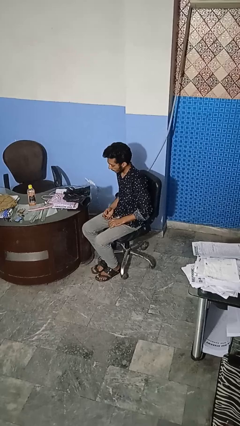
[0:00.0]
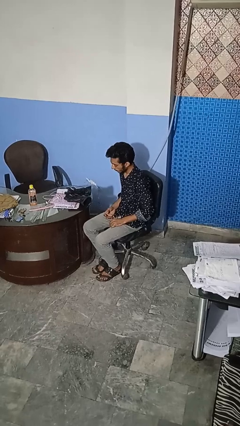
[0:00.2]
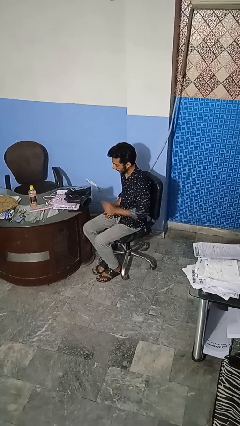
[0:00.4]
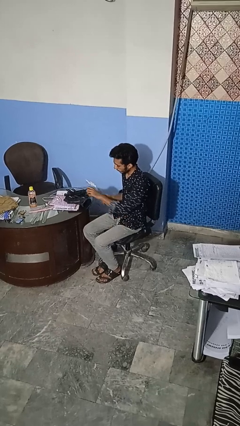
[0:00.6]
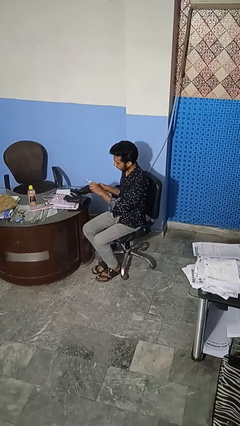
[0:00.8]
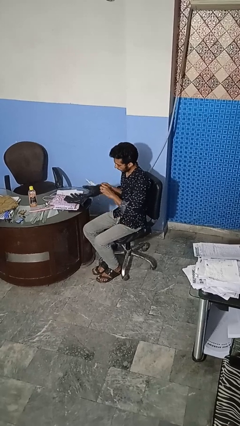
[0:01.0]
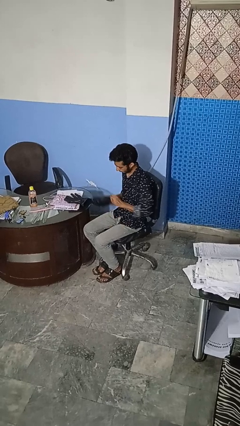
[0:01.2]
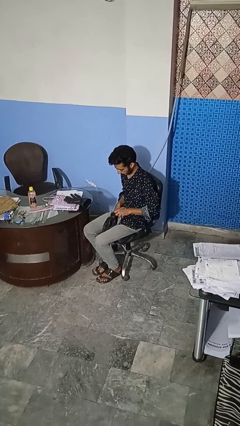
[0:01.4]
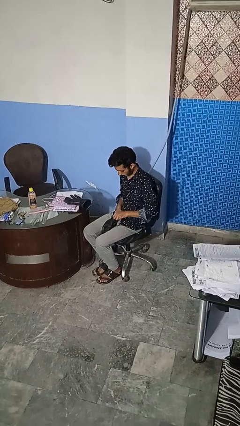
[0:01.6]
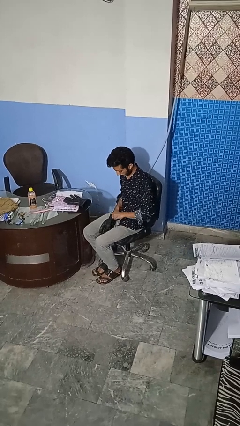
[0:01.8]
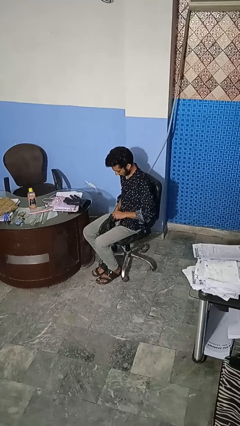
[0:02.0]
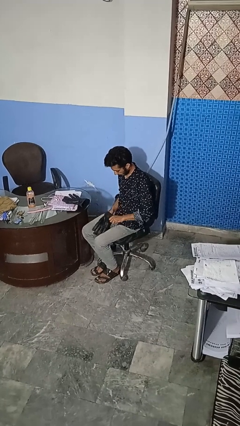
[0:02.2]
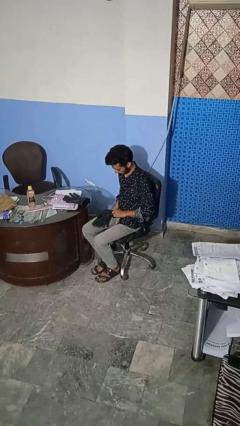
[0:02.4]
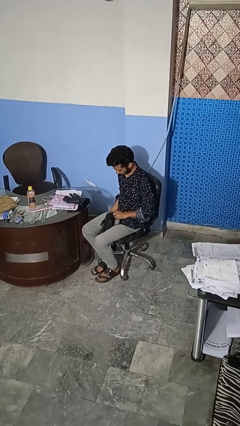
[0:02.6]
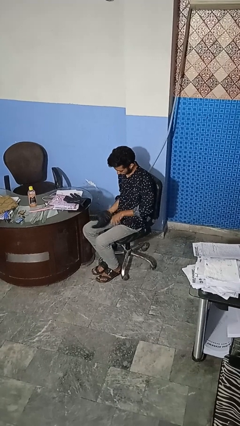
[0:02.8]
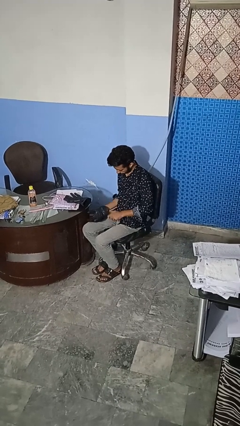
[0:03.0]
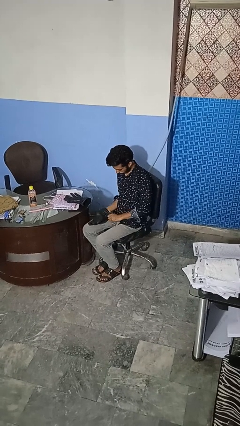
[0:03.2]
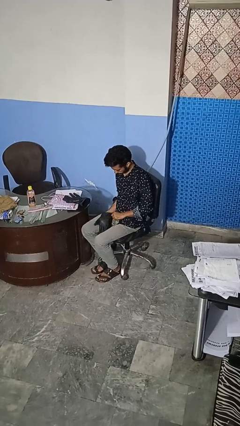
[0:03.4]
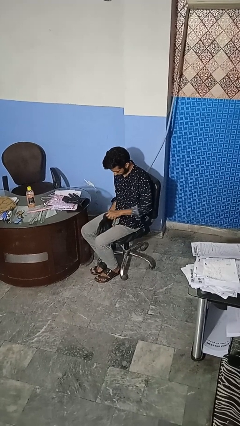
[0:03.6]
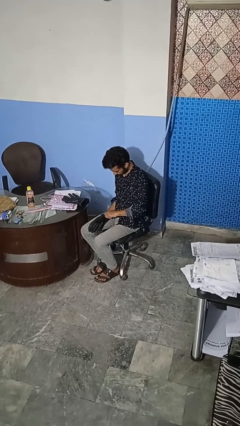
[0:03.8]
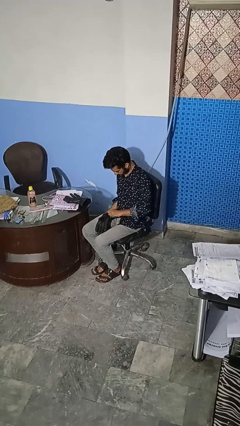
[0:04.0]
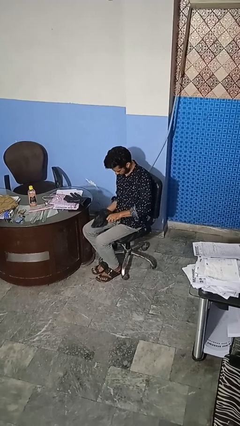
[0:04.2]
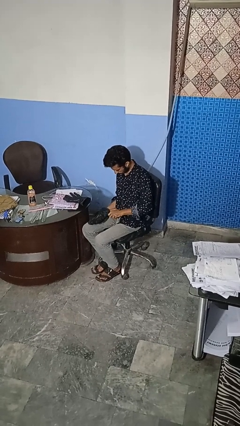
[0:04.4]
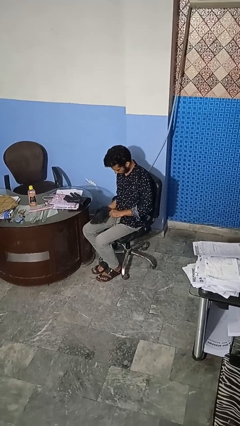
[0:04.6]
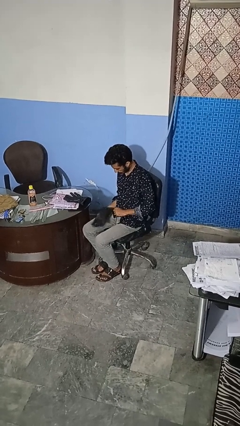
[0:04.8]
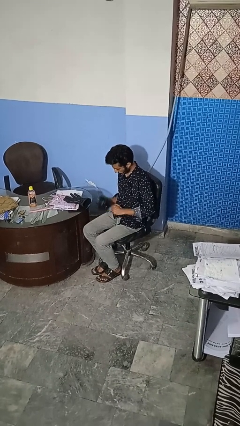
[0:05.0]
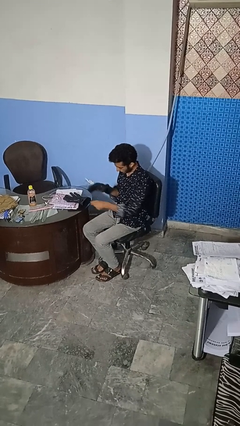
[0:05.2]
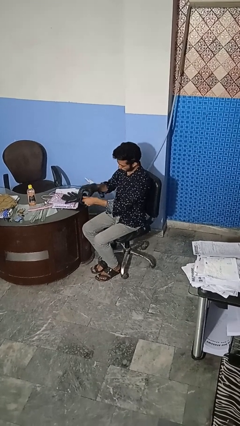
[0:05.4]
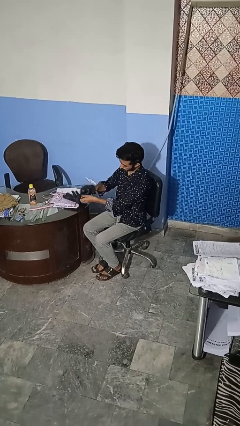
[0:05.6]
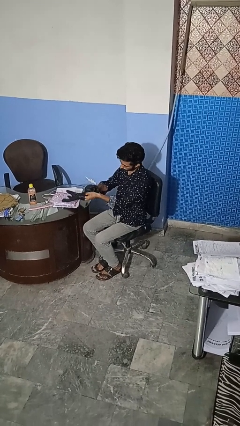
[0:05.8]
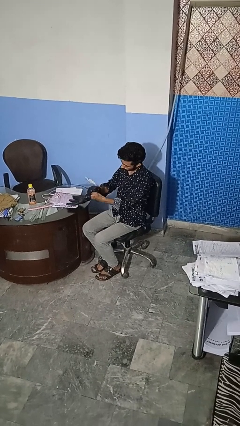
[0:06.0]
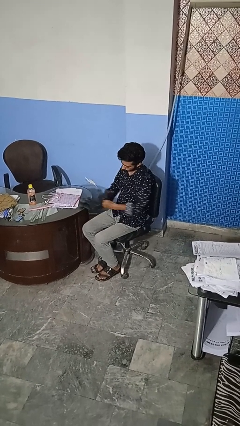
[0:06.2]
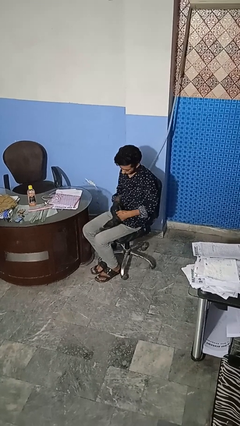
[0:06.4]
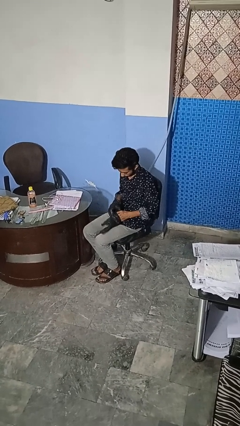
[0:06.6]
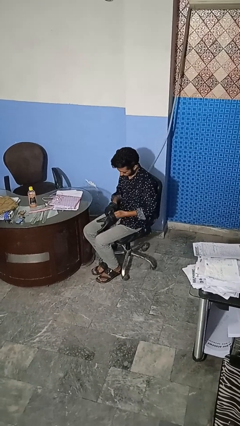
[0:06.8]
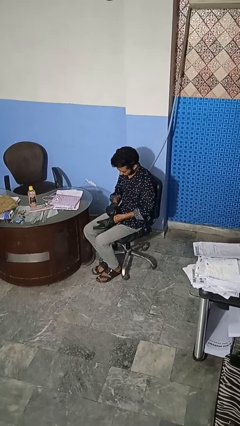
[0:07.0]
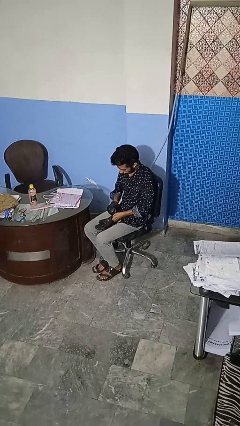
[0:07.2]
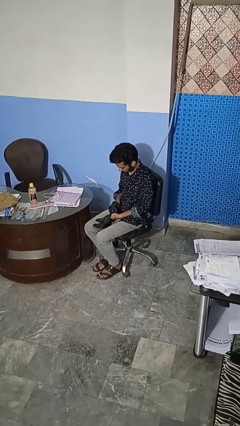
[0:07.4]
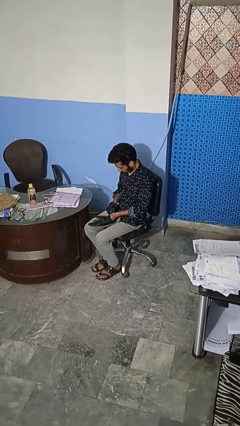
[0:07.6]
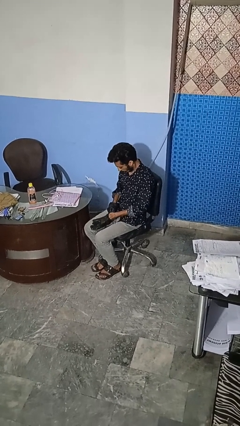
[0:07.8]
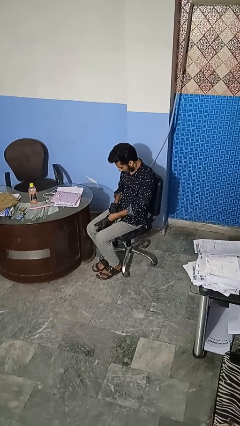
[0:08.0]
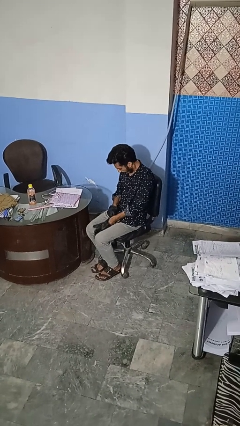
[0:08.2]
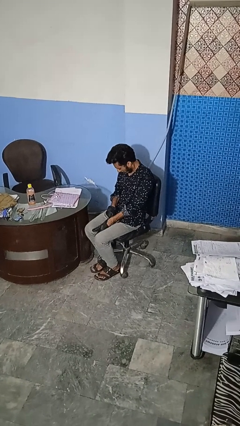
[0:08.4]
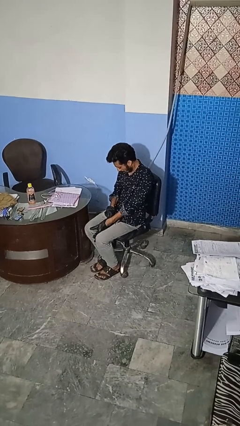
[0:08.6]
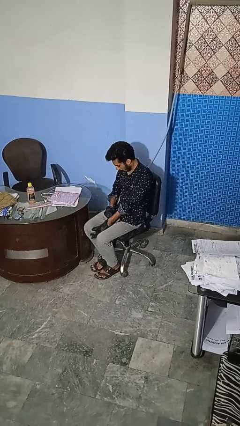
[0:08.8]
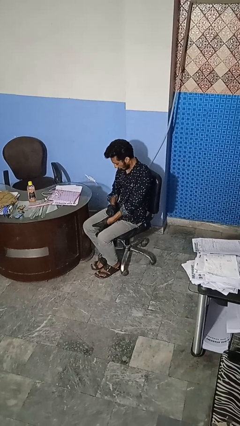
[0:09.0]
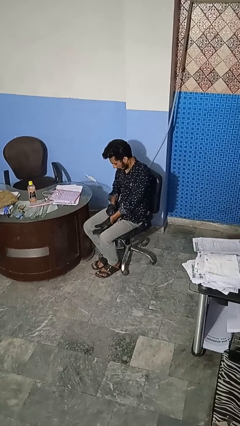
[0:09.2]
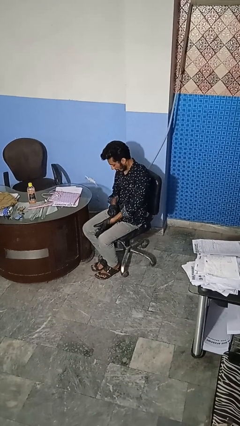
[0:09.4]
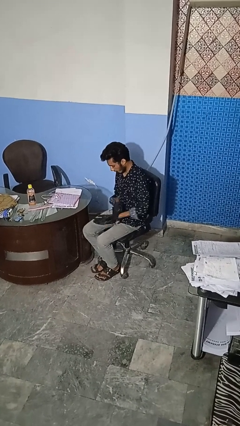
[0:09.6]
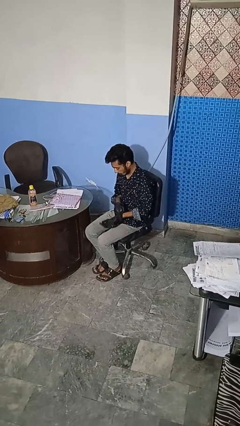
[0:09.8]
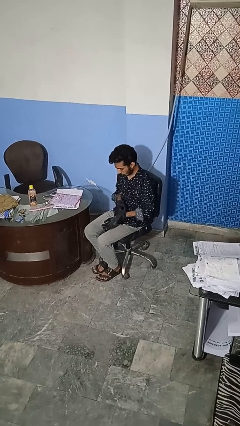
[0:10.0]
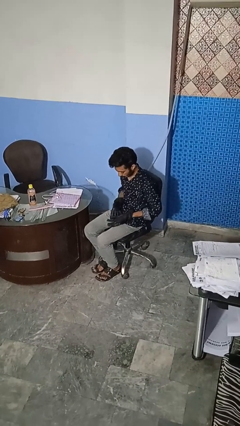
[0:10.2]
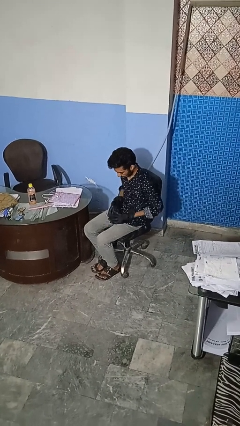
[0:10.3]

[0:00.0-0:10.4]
person puts on gloves

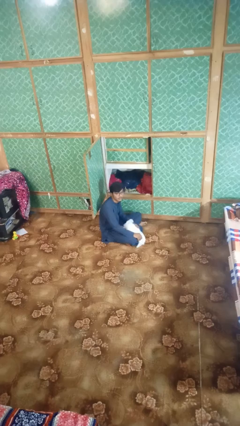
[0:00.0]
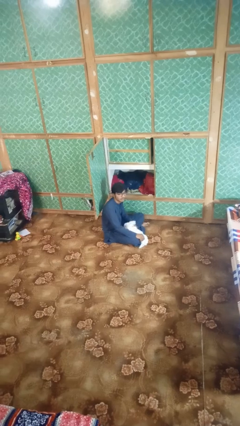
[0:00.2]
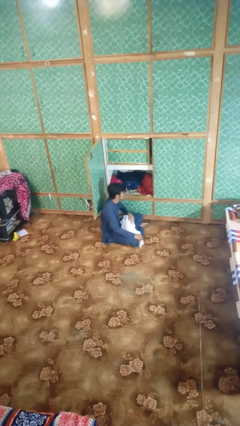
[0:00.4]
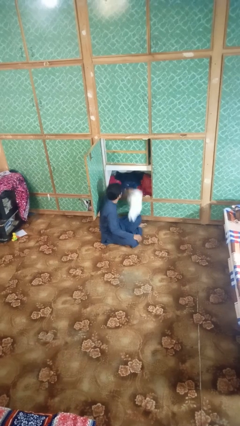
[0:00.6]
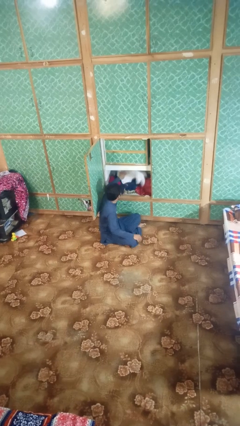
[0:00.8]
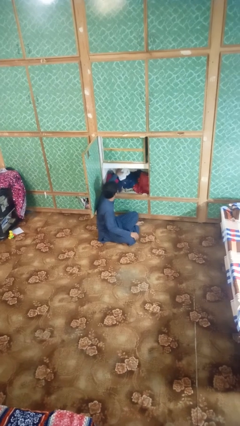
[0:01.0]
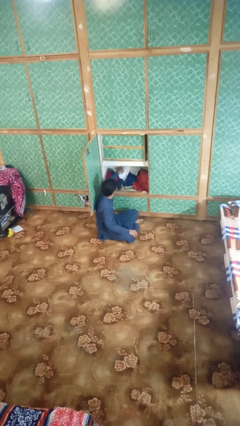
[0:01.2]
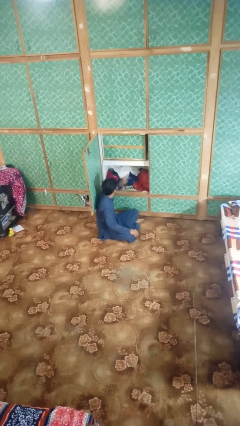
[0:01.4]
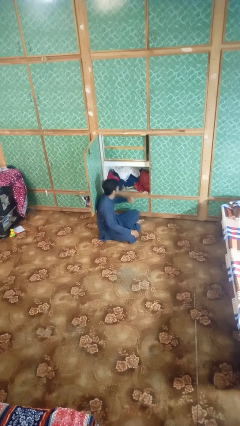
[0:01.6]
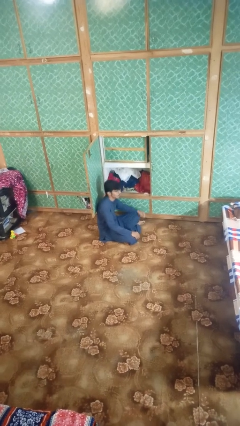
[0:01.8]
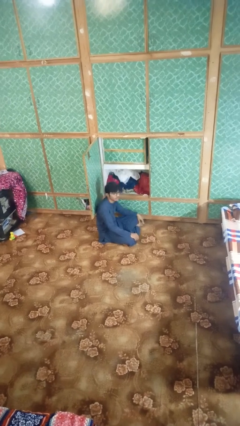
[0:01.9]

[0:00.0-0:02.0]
person puts clothes into dresser

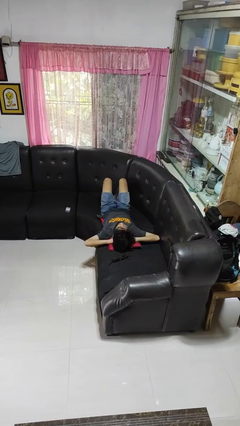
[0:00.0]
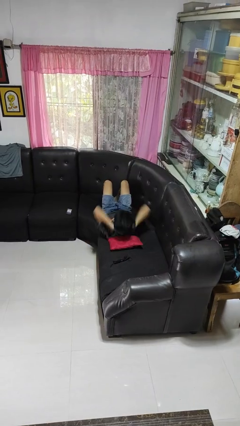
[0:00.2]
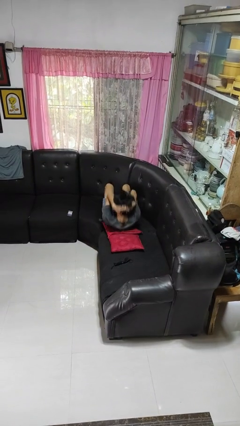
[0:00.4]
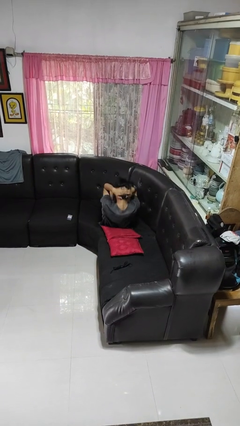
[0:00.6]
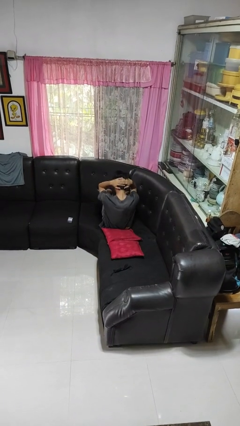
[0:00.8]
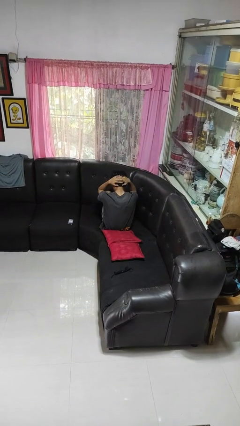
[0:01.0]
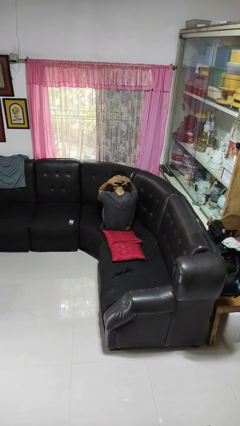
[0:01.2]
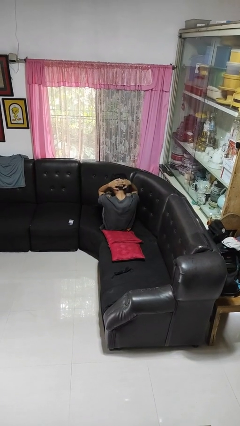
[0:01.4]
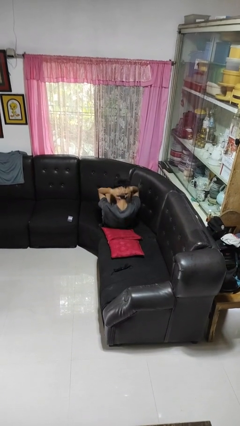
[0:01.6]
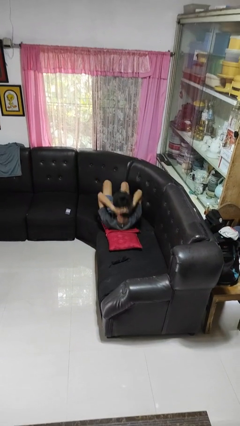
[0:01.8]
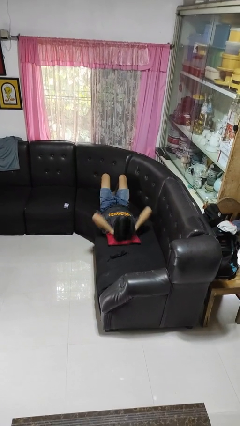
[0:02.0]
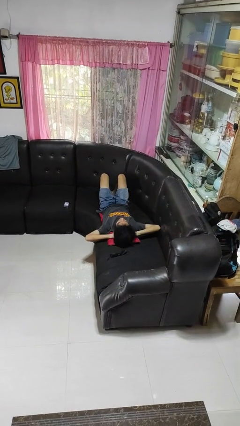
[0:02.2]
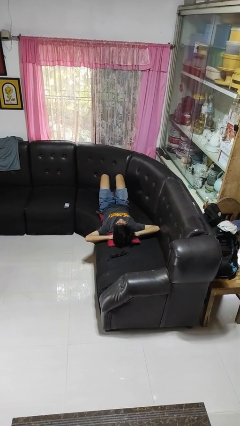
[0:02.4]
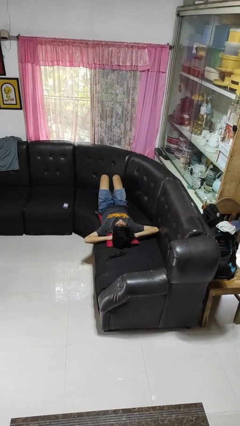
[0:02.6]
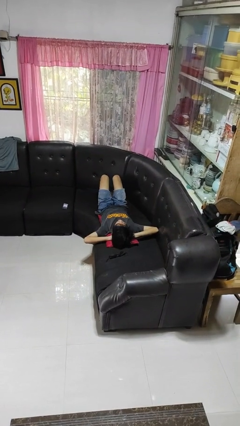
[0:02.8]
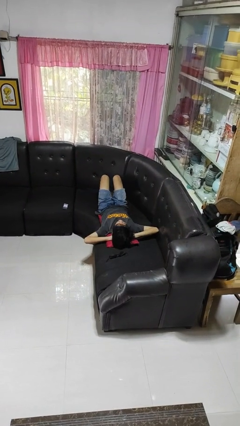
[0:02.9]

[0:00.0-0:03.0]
person exercises with situp

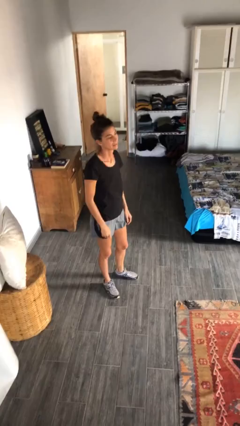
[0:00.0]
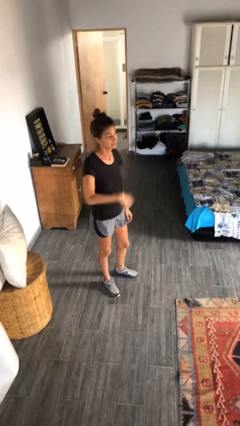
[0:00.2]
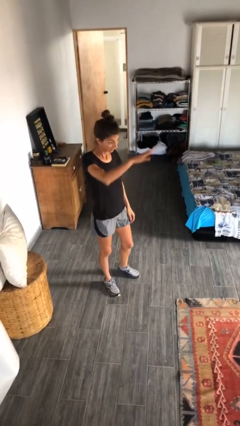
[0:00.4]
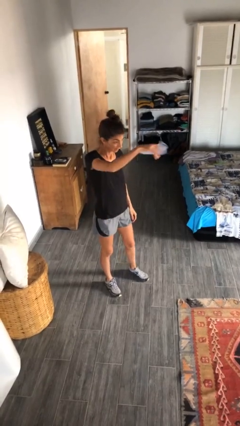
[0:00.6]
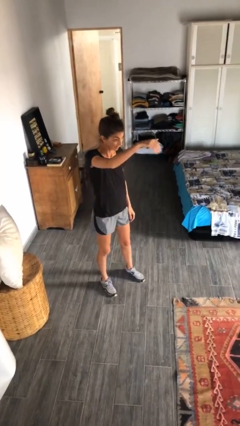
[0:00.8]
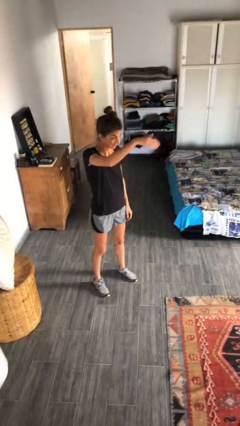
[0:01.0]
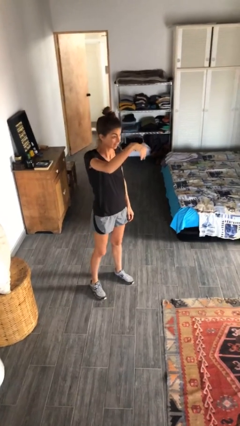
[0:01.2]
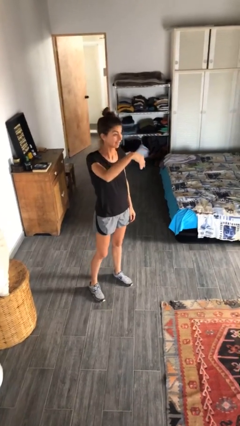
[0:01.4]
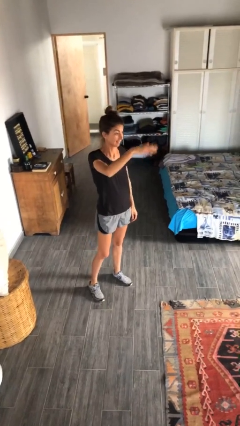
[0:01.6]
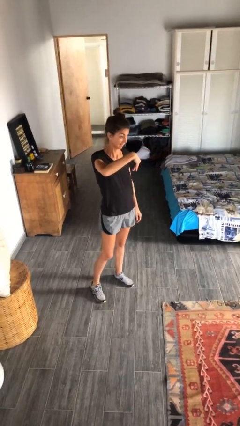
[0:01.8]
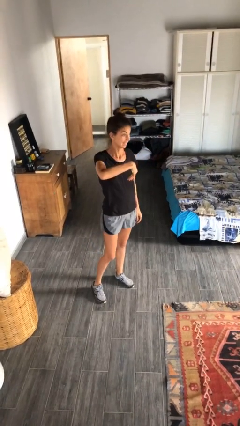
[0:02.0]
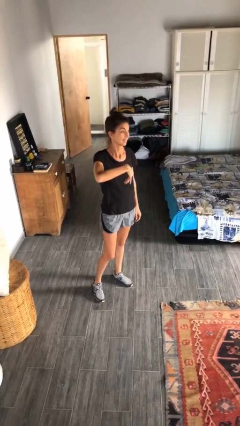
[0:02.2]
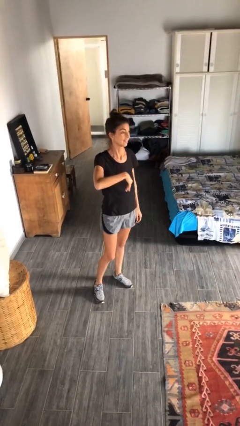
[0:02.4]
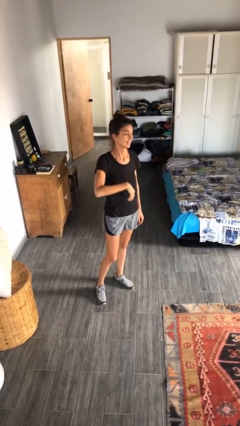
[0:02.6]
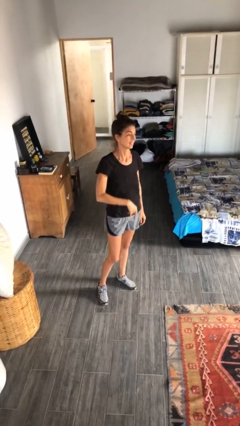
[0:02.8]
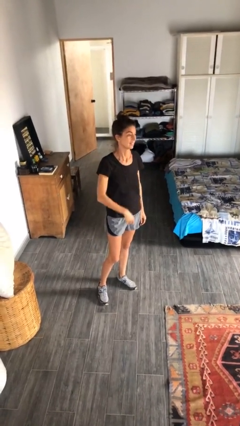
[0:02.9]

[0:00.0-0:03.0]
person gestures come here
